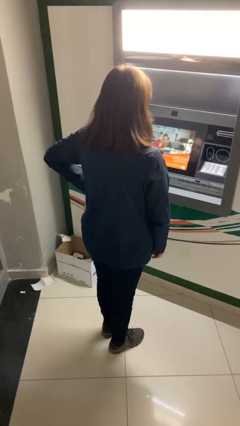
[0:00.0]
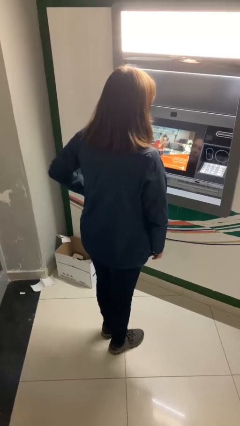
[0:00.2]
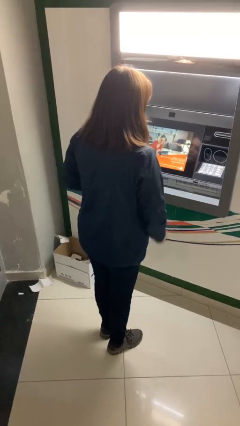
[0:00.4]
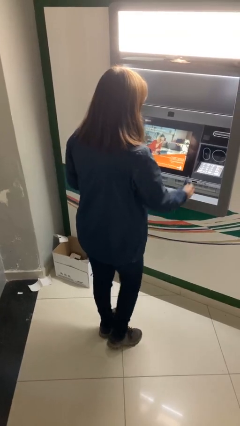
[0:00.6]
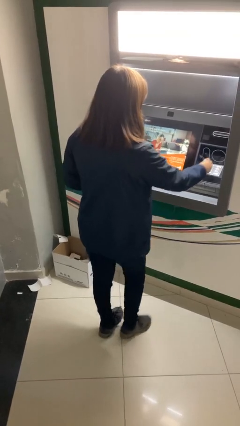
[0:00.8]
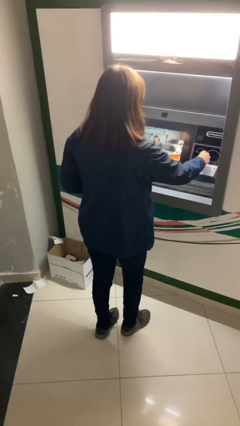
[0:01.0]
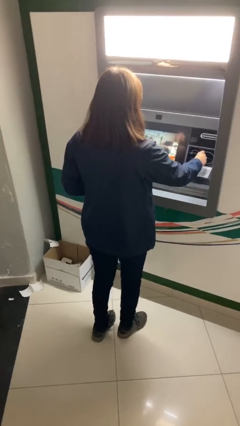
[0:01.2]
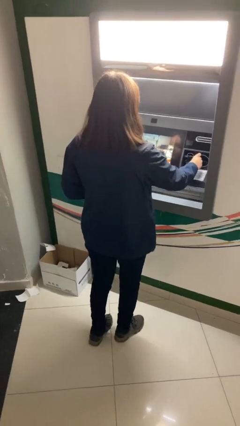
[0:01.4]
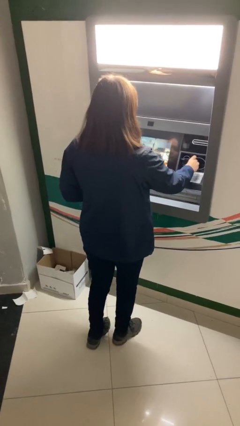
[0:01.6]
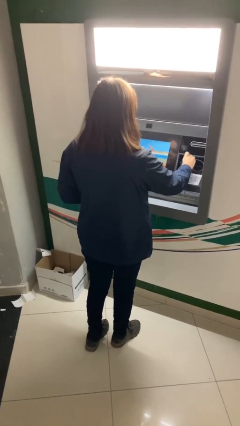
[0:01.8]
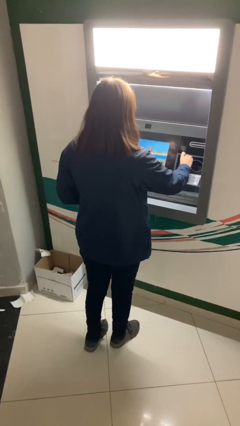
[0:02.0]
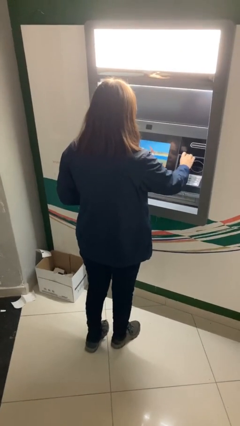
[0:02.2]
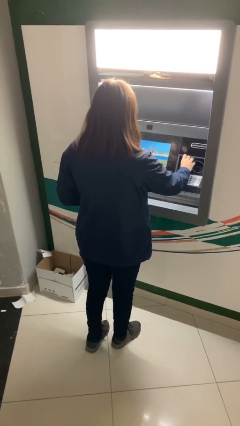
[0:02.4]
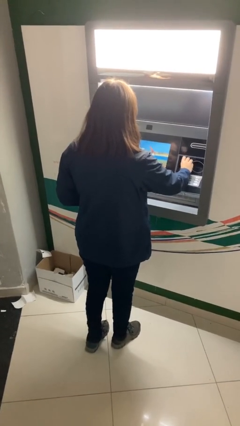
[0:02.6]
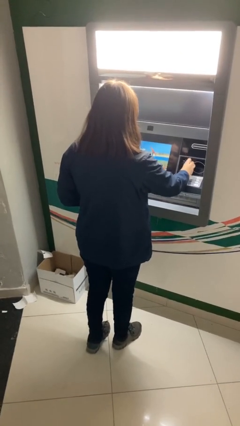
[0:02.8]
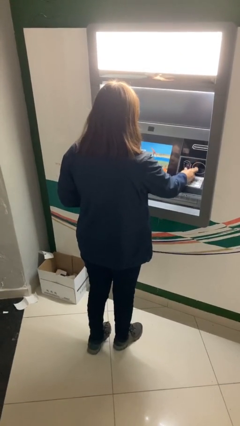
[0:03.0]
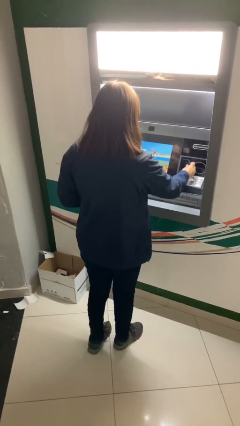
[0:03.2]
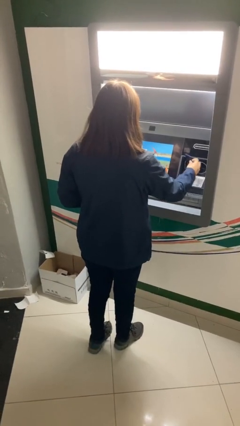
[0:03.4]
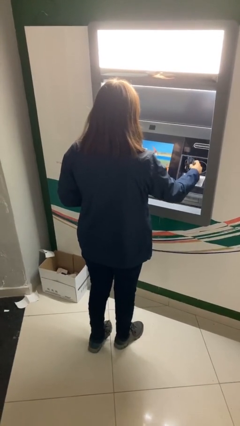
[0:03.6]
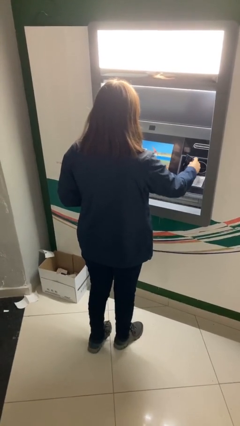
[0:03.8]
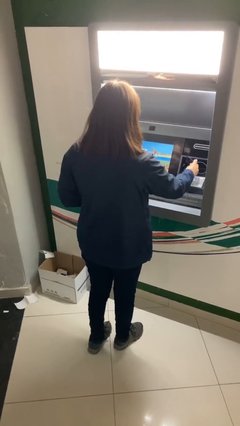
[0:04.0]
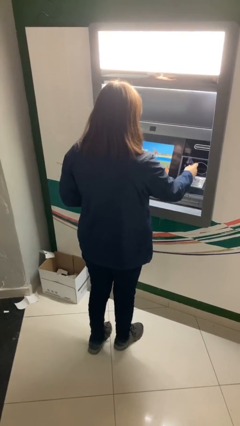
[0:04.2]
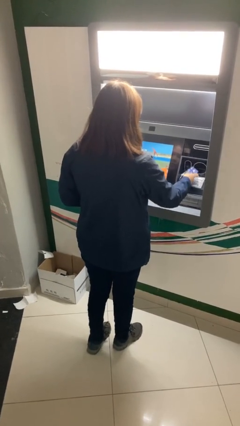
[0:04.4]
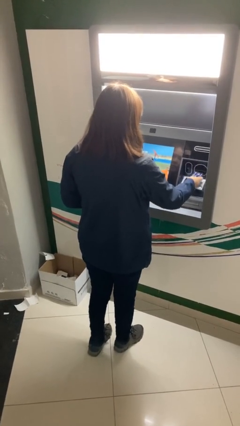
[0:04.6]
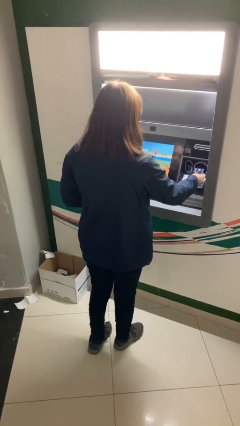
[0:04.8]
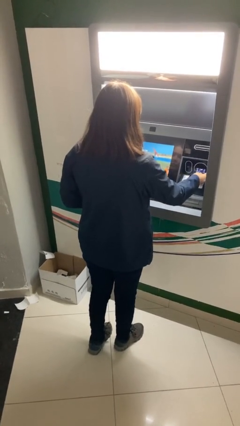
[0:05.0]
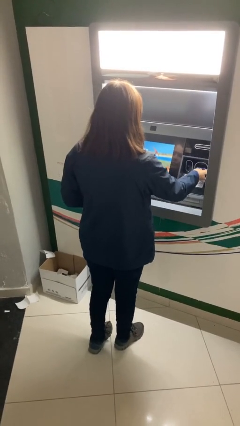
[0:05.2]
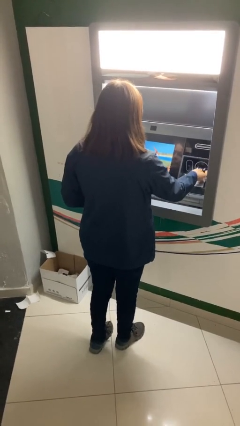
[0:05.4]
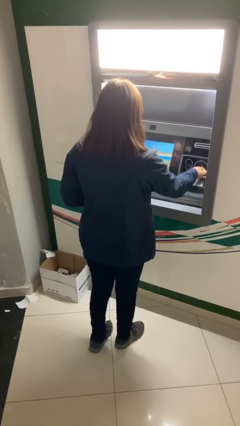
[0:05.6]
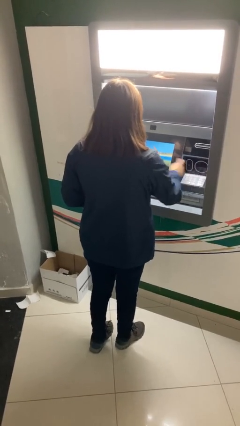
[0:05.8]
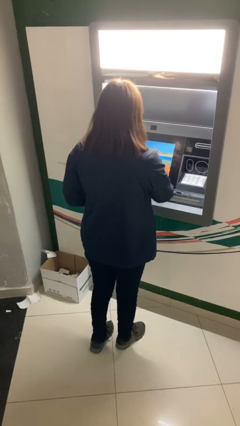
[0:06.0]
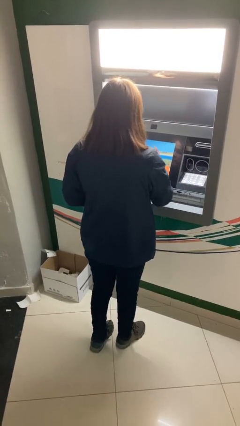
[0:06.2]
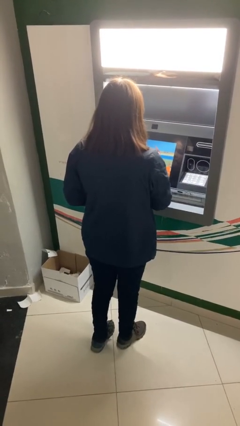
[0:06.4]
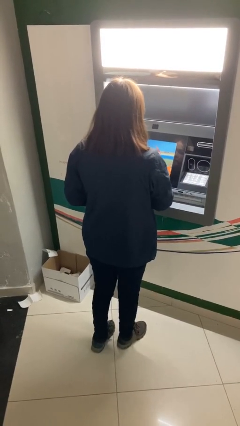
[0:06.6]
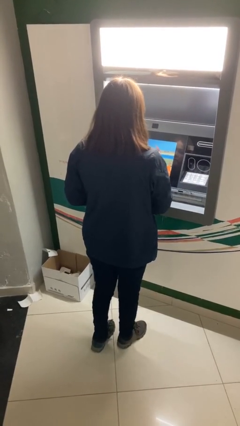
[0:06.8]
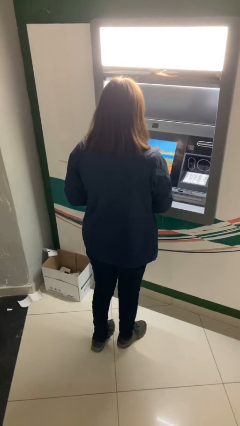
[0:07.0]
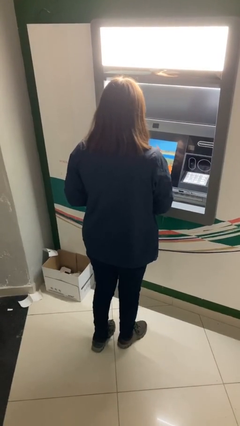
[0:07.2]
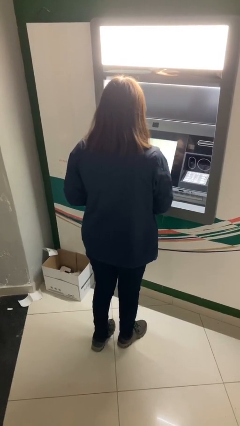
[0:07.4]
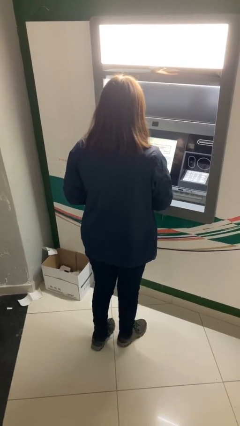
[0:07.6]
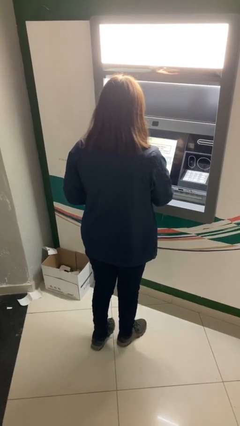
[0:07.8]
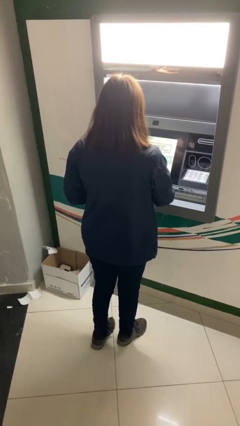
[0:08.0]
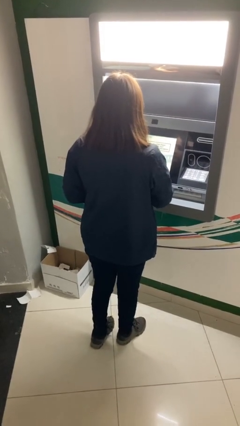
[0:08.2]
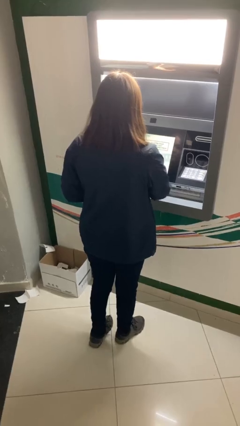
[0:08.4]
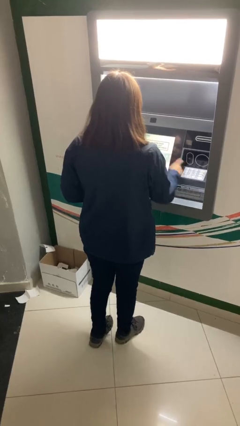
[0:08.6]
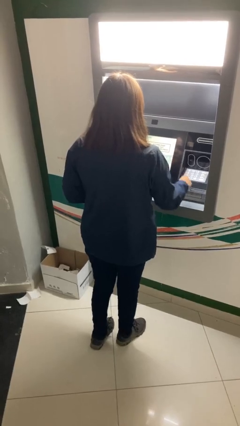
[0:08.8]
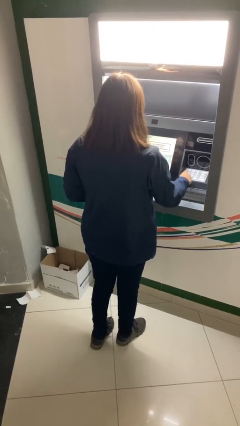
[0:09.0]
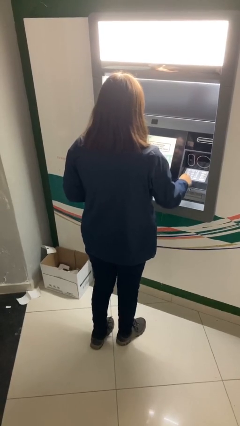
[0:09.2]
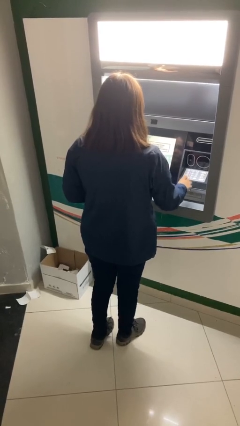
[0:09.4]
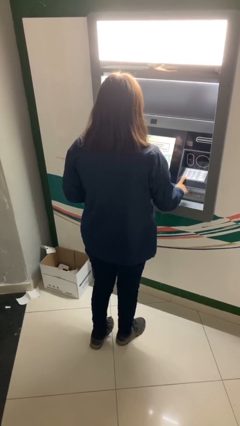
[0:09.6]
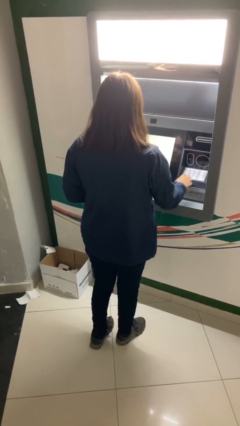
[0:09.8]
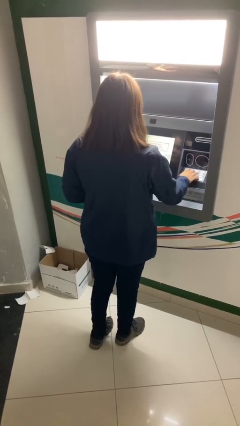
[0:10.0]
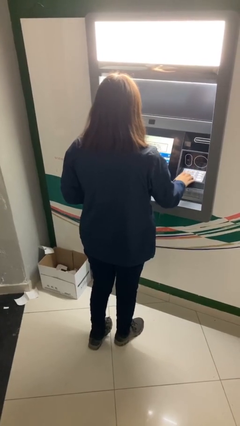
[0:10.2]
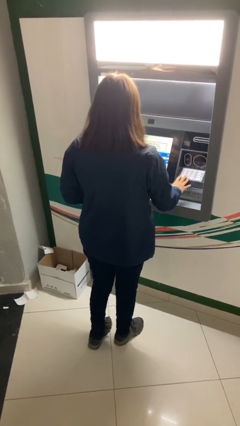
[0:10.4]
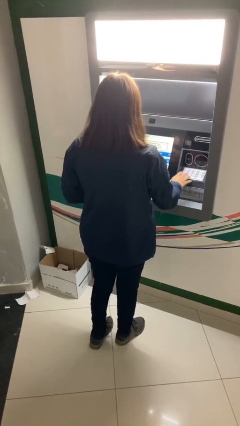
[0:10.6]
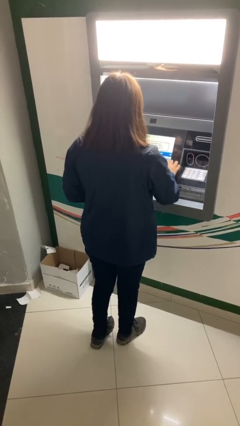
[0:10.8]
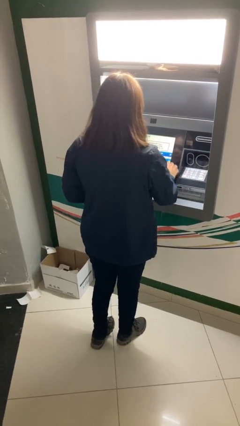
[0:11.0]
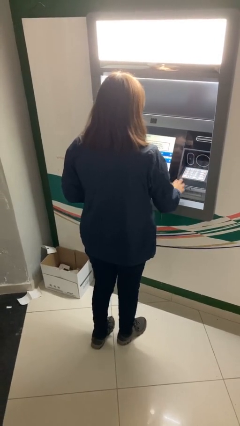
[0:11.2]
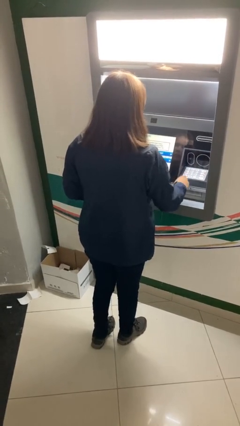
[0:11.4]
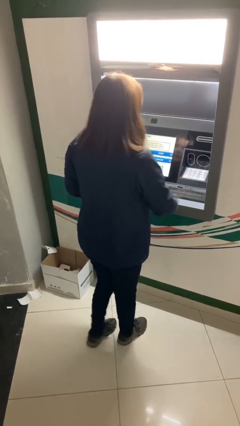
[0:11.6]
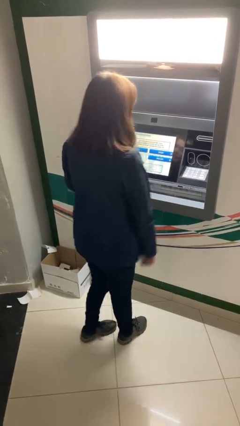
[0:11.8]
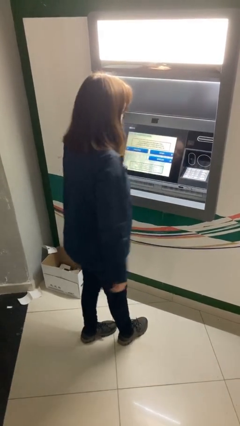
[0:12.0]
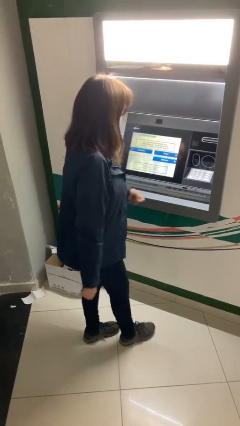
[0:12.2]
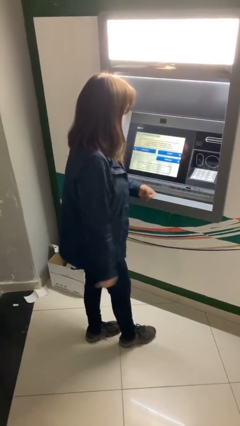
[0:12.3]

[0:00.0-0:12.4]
person purchases from machine

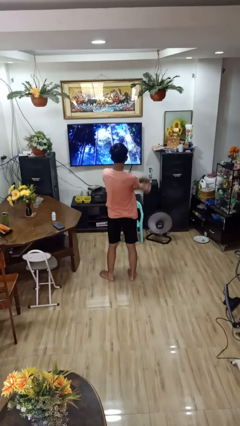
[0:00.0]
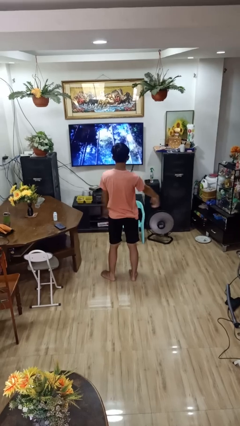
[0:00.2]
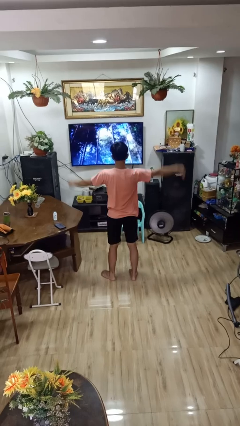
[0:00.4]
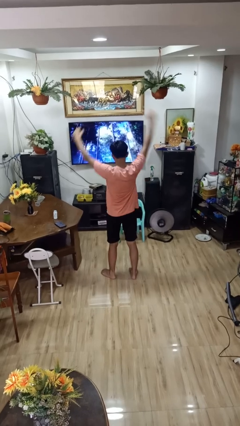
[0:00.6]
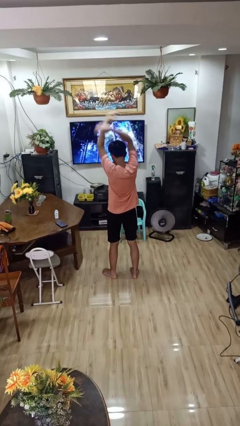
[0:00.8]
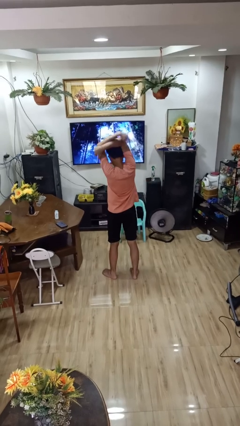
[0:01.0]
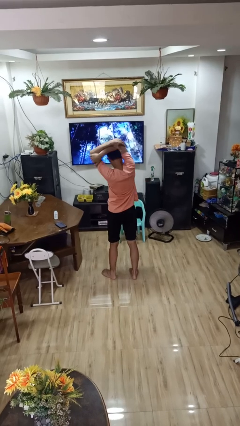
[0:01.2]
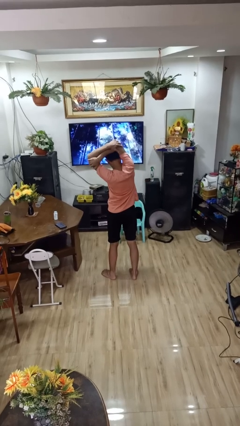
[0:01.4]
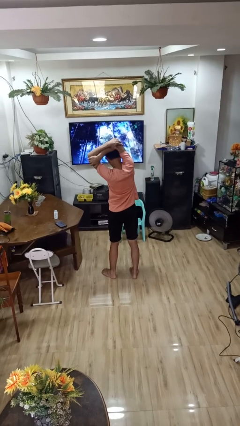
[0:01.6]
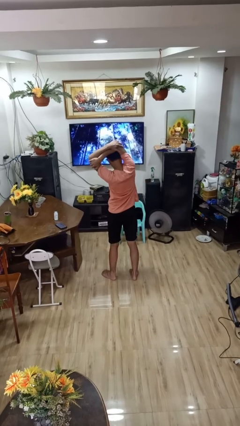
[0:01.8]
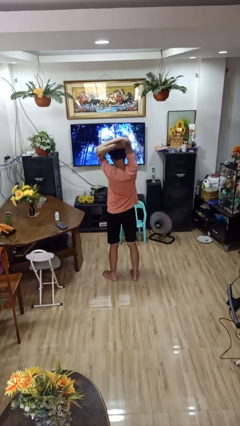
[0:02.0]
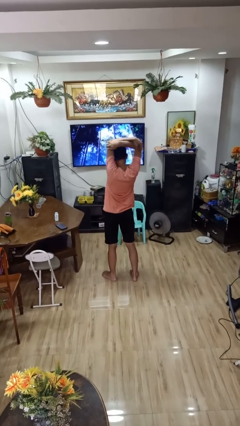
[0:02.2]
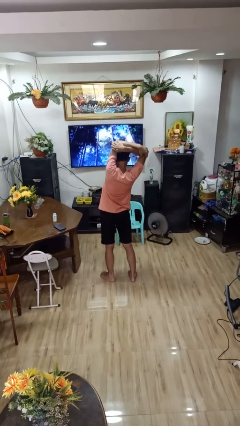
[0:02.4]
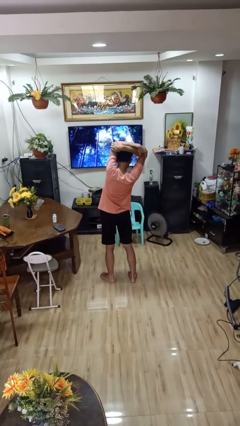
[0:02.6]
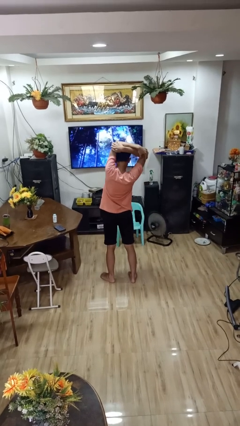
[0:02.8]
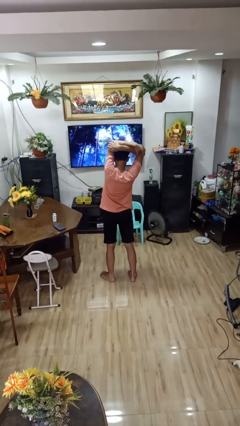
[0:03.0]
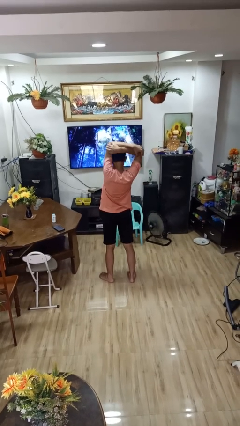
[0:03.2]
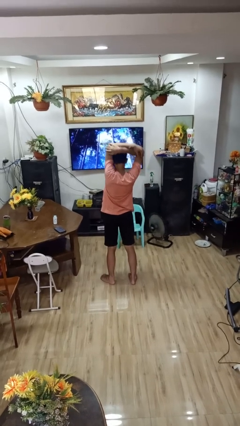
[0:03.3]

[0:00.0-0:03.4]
person stretches arms over head

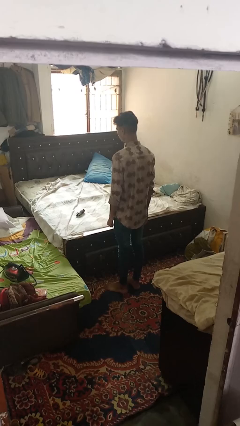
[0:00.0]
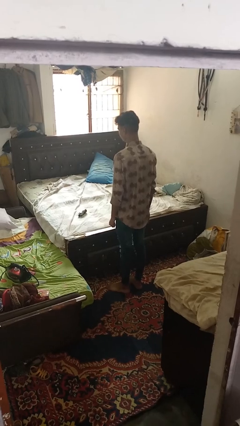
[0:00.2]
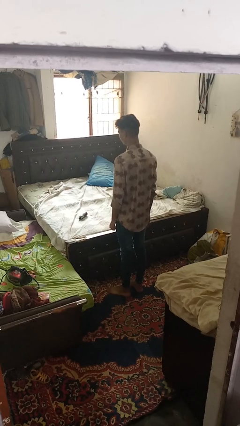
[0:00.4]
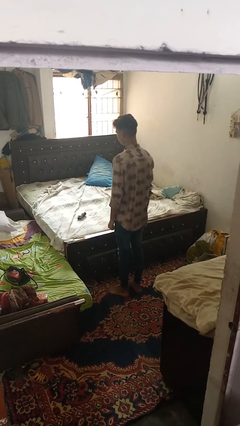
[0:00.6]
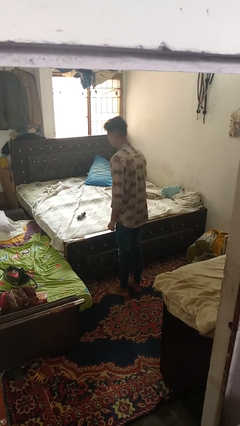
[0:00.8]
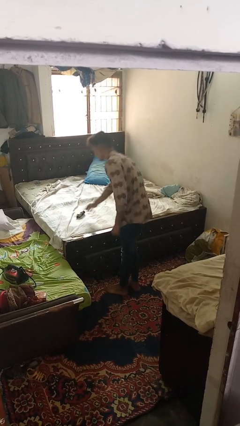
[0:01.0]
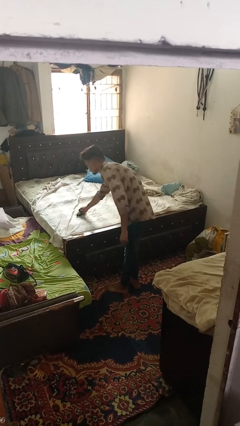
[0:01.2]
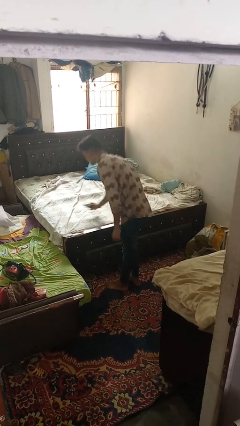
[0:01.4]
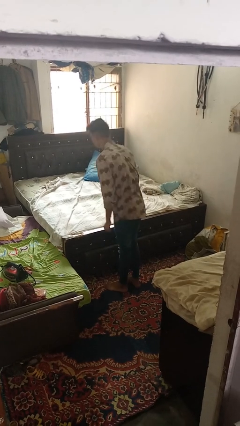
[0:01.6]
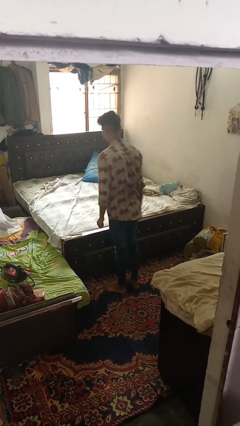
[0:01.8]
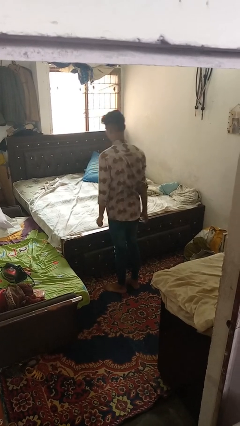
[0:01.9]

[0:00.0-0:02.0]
person picks up object from bed

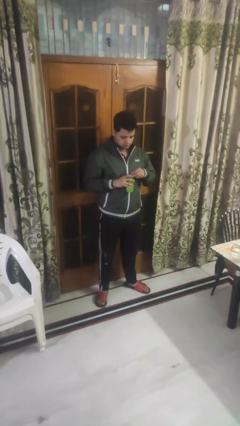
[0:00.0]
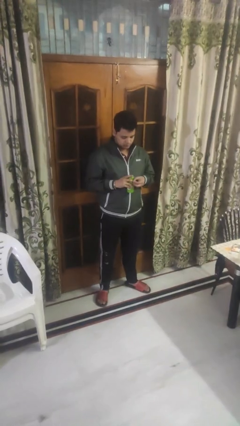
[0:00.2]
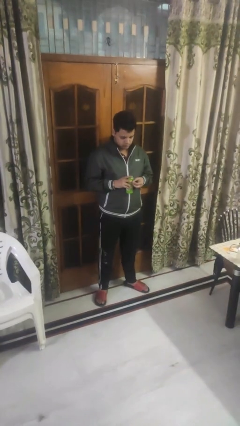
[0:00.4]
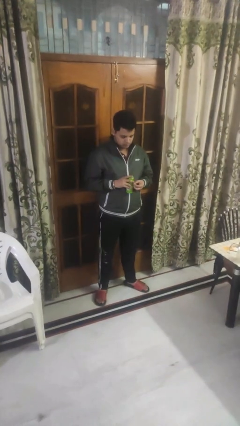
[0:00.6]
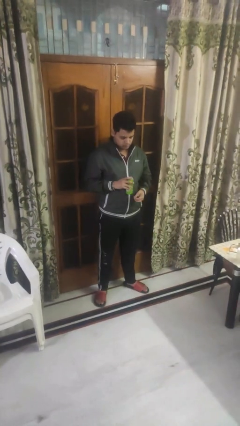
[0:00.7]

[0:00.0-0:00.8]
person opens beverage can
